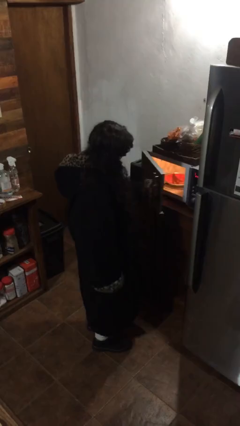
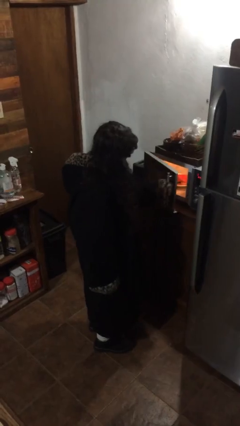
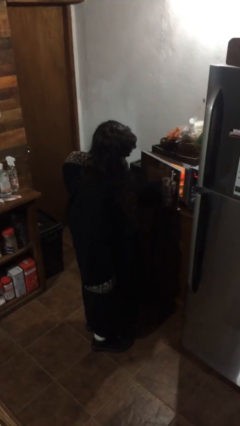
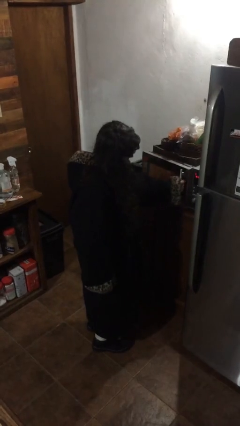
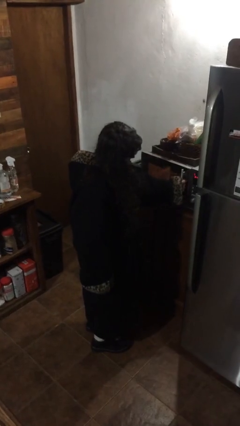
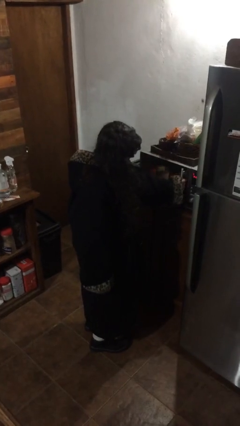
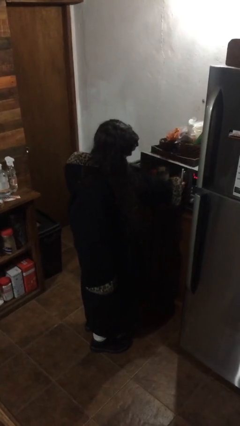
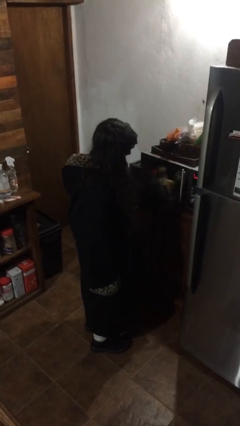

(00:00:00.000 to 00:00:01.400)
person closes microwave

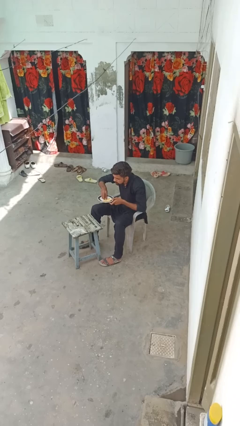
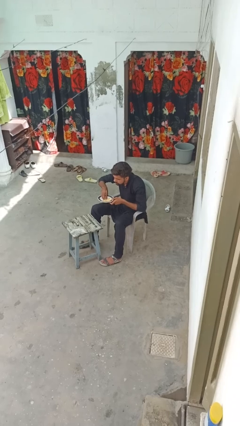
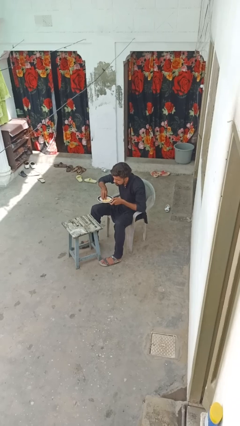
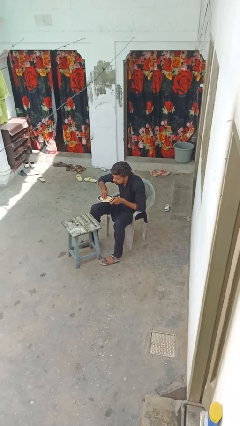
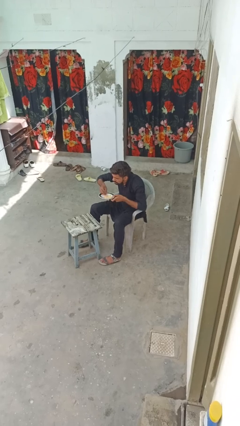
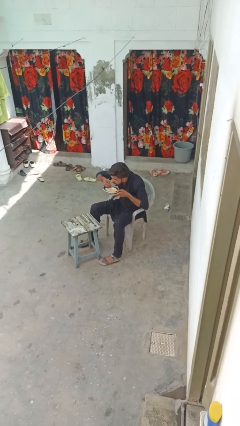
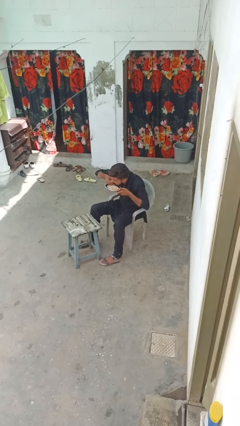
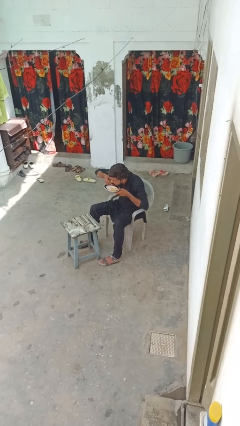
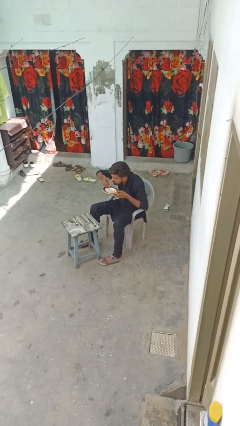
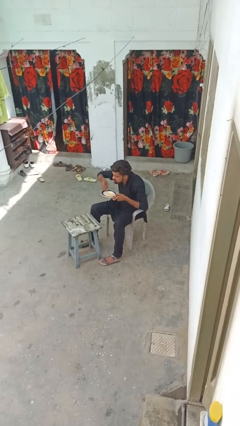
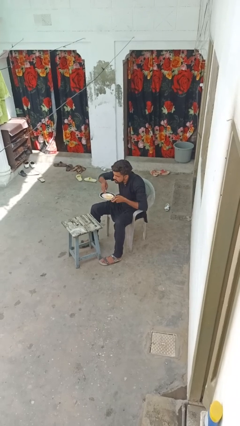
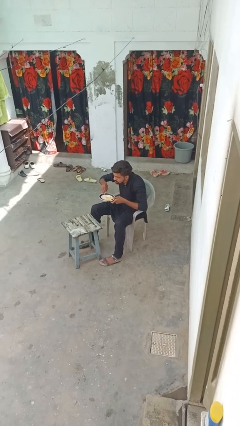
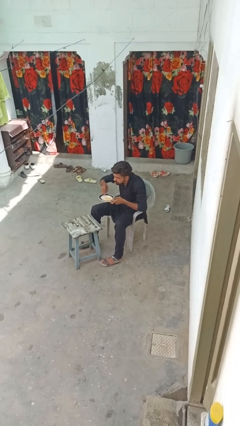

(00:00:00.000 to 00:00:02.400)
person eats with hands

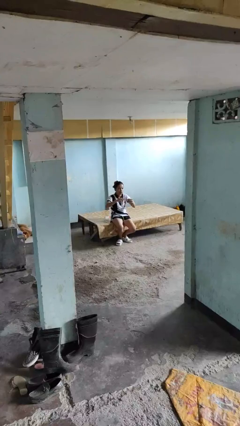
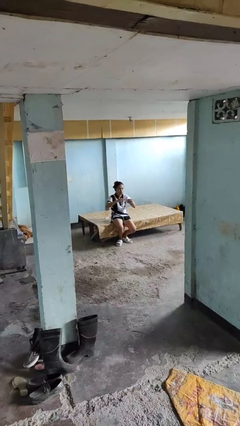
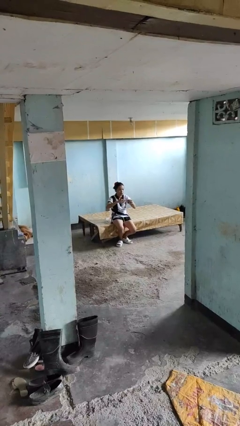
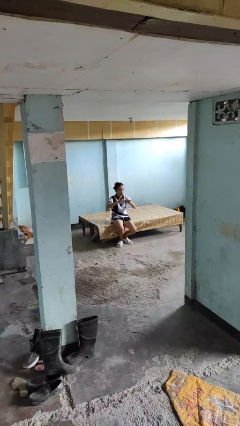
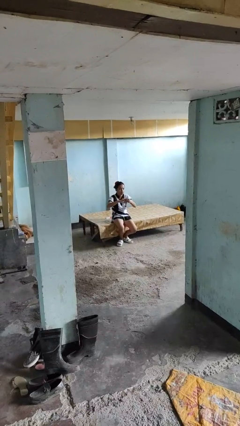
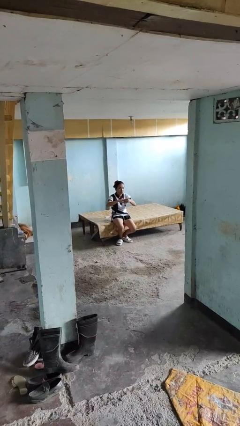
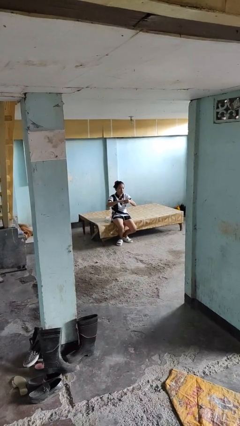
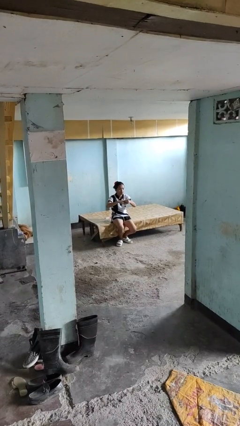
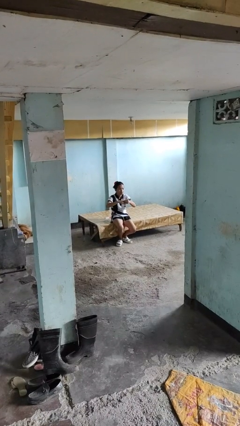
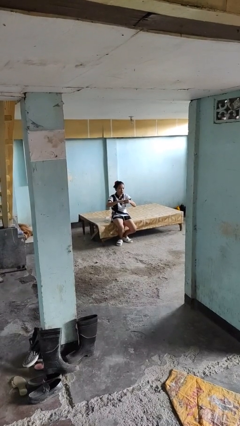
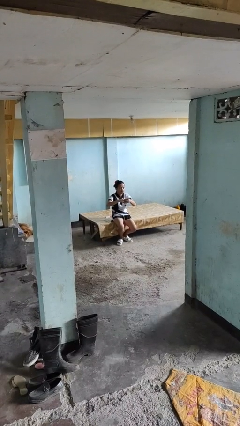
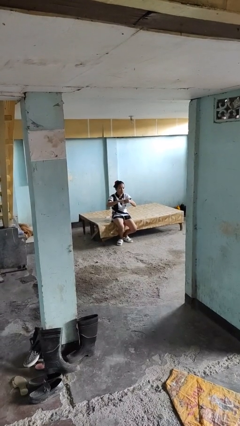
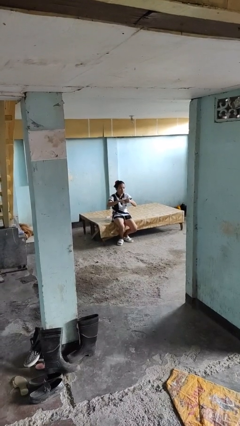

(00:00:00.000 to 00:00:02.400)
person puts on ring

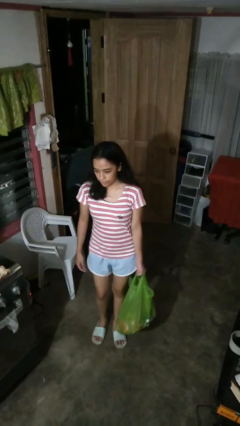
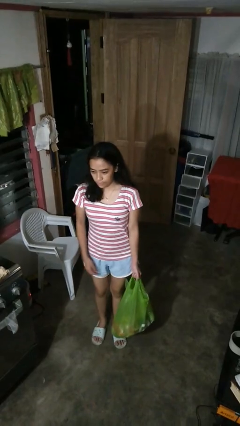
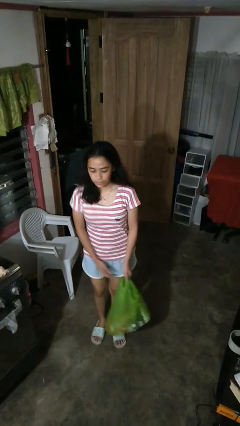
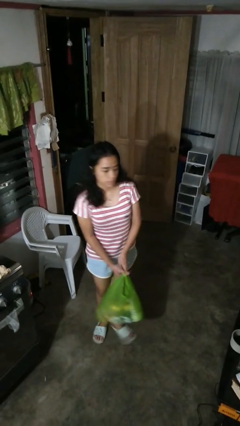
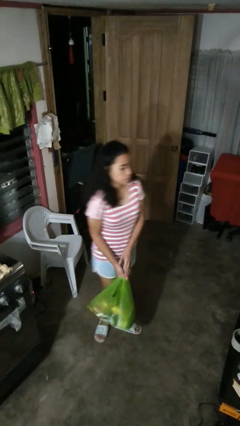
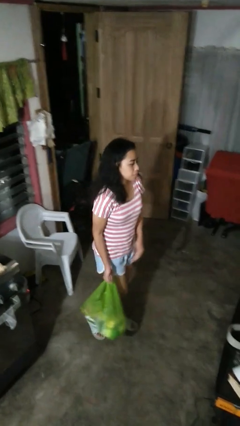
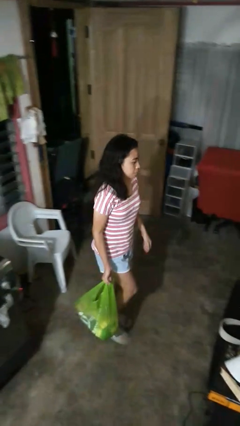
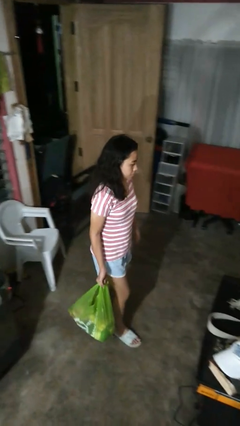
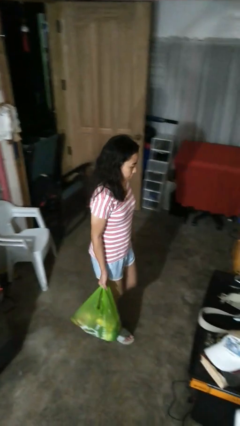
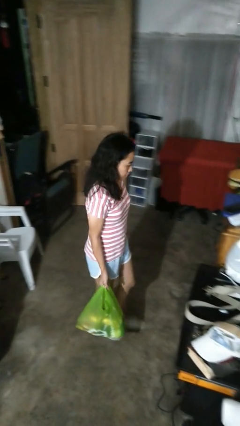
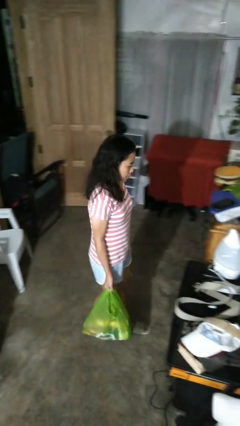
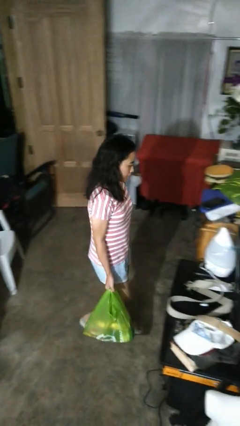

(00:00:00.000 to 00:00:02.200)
person carries groceries

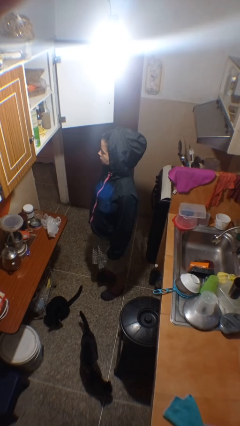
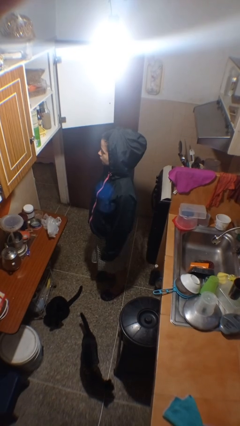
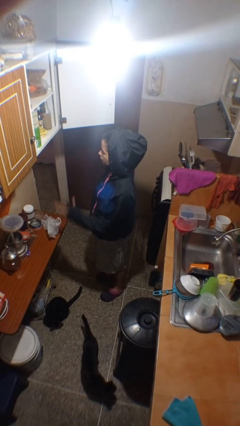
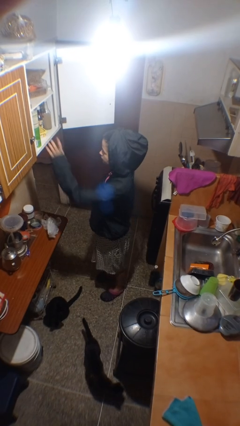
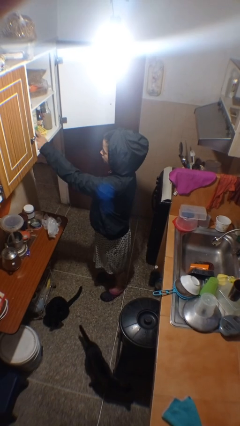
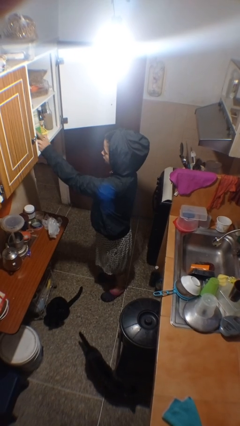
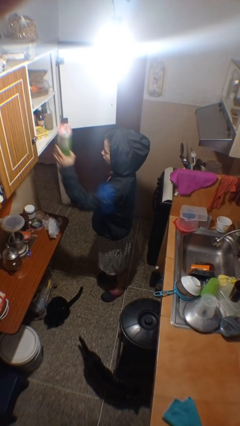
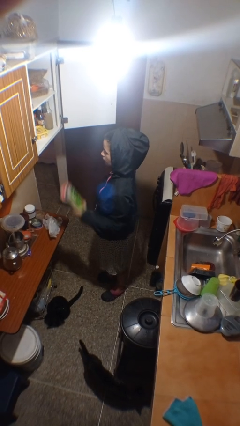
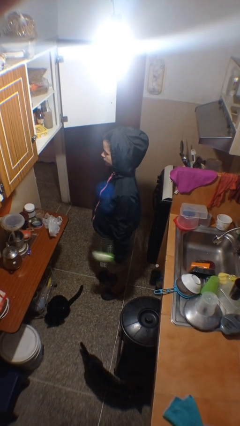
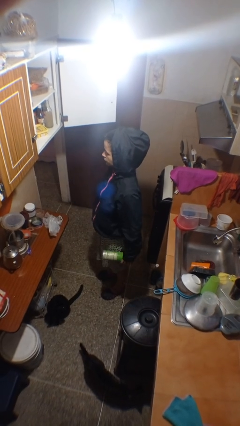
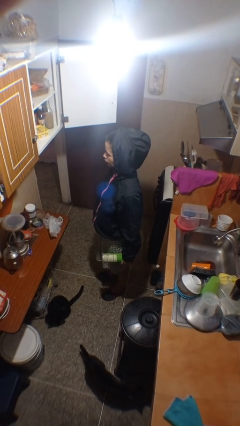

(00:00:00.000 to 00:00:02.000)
person takes object from cabinet

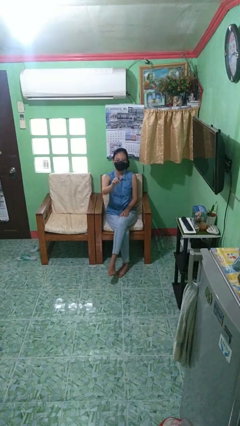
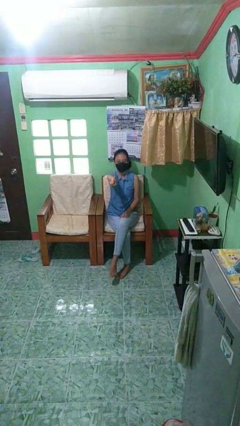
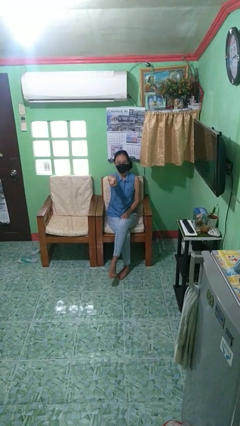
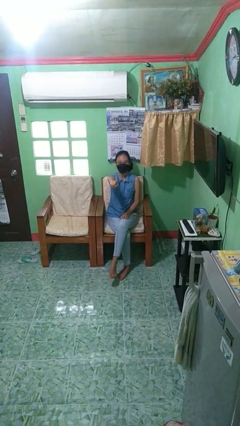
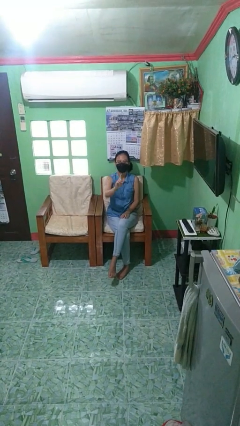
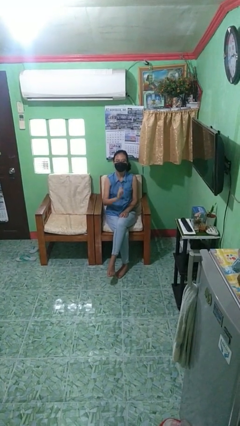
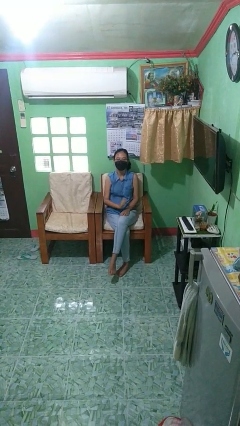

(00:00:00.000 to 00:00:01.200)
person gestures number one

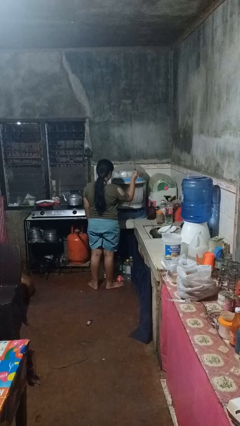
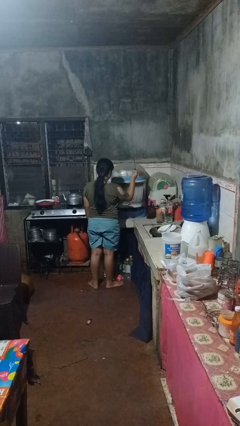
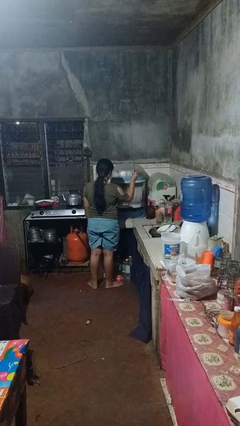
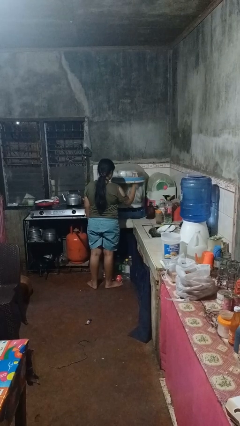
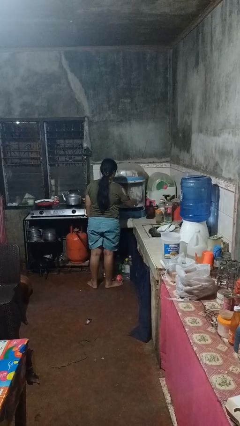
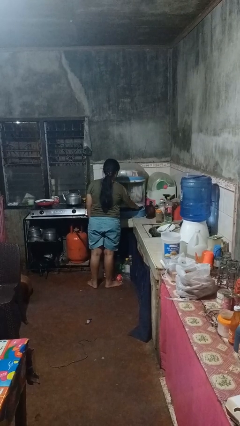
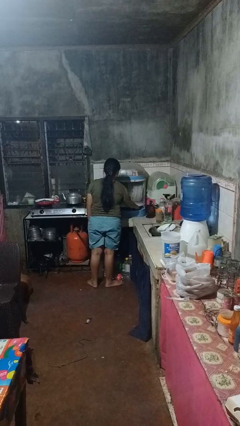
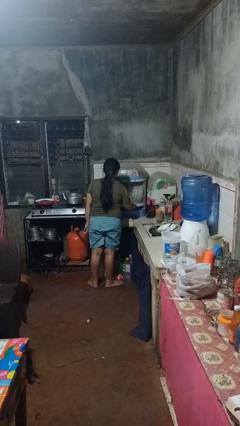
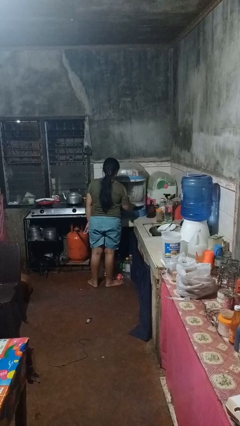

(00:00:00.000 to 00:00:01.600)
person puts object into kitchen drawer

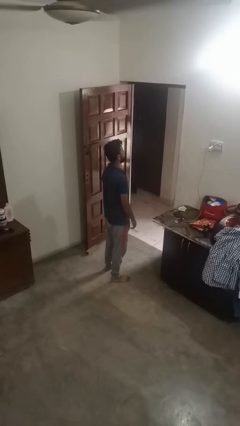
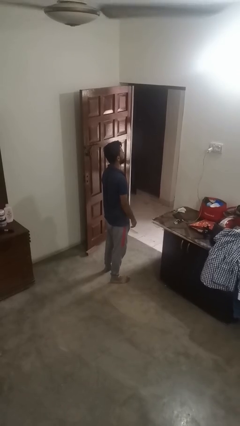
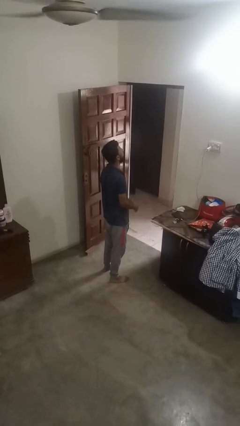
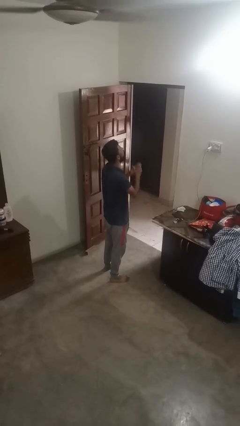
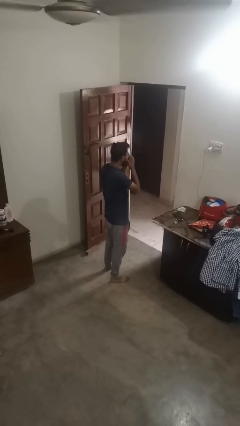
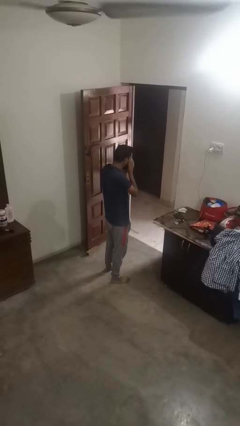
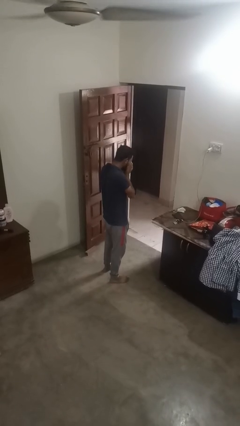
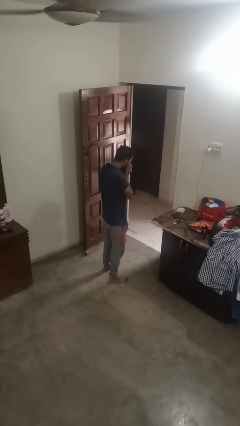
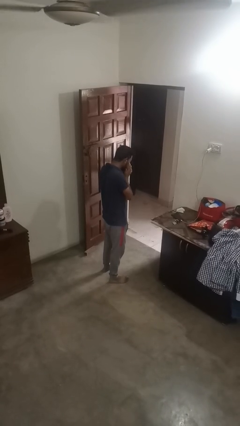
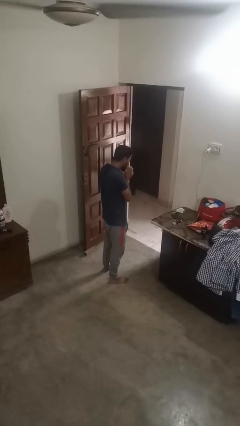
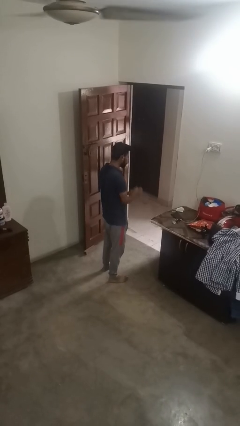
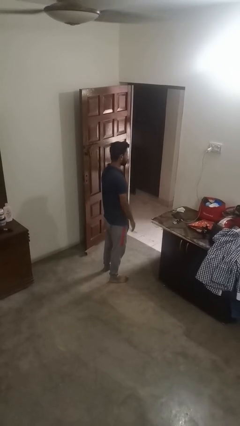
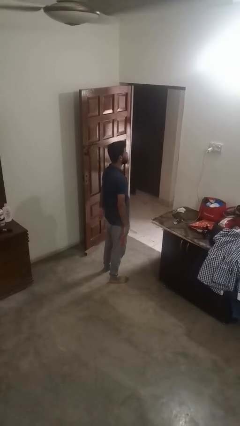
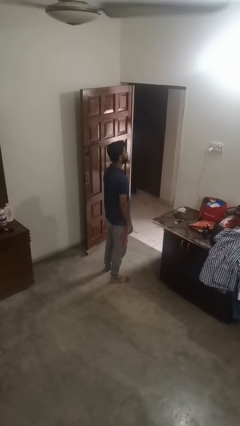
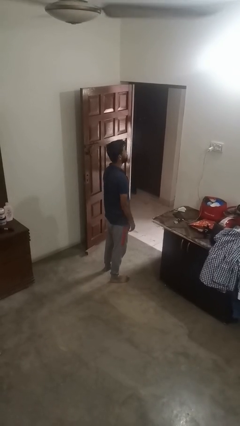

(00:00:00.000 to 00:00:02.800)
person sneezes into hand

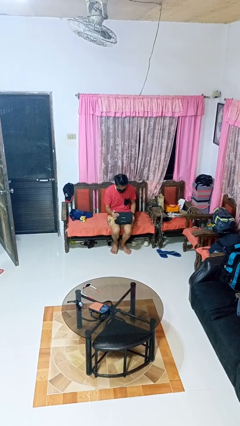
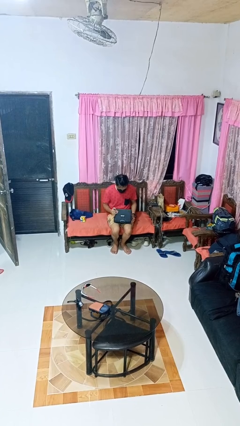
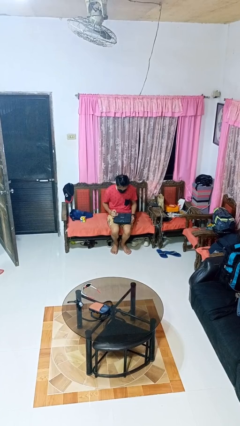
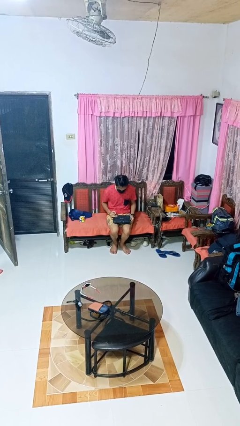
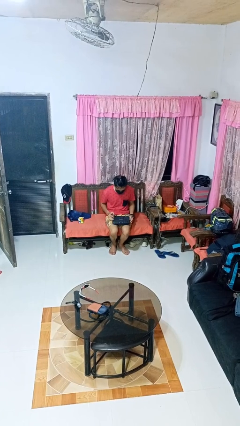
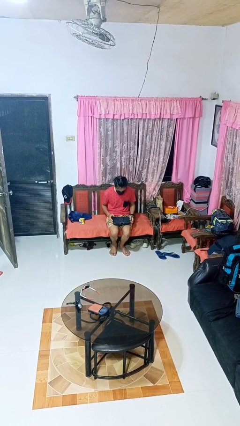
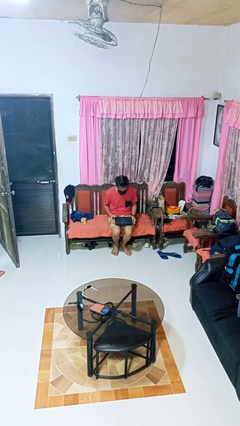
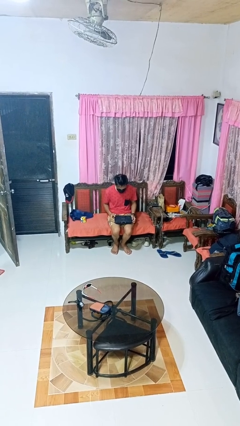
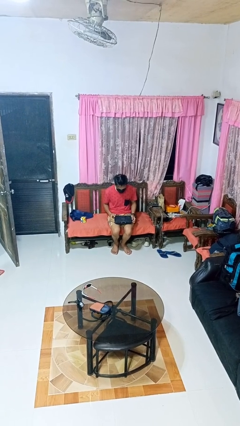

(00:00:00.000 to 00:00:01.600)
person closes laptop
